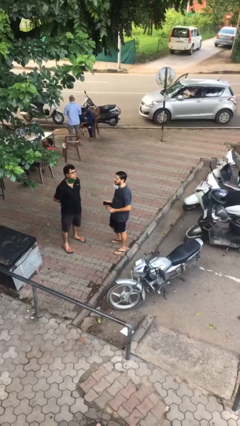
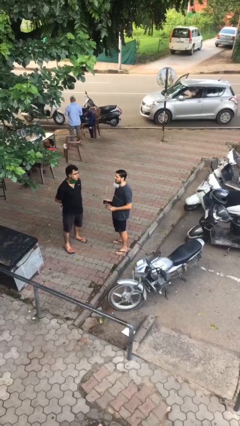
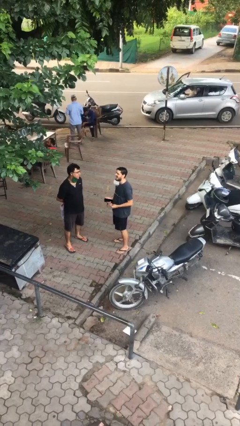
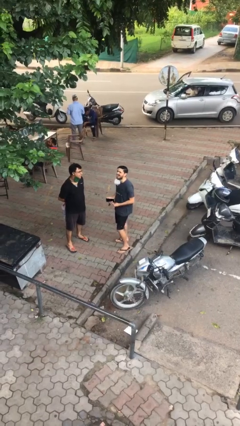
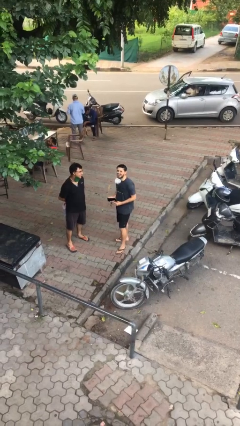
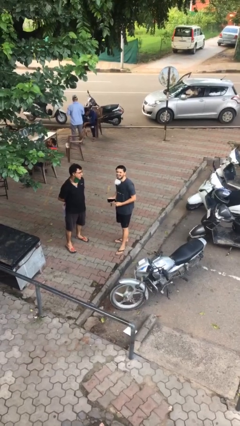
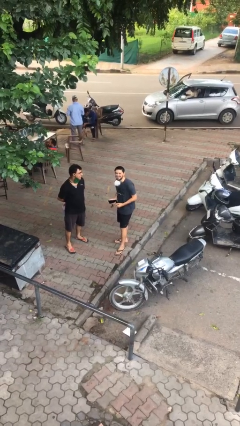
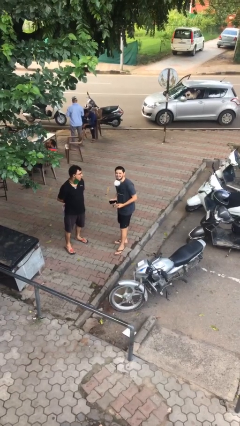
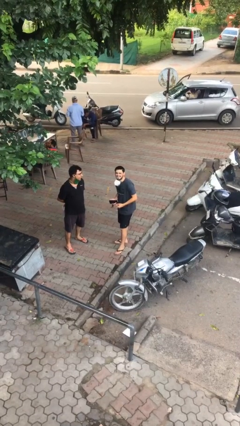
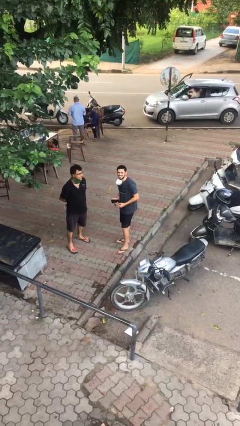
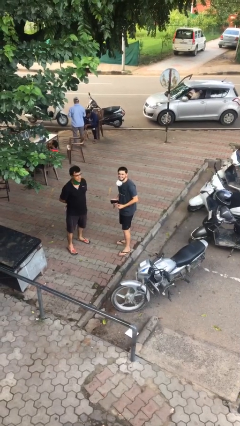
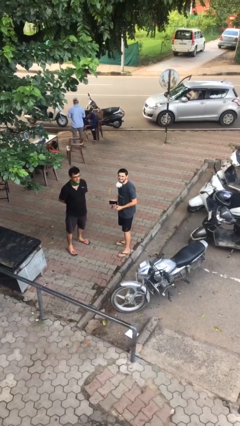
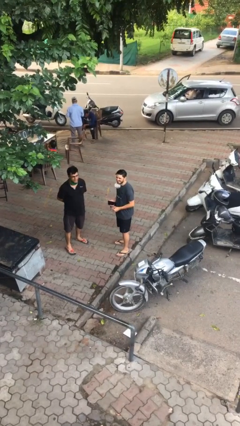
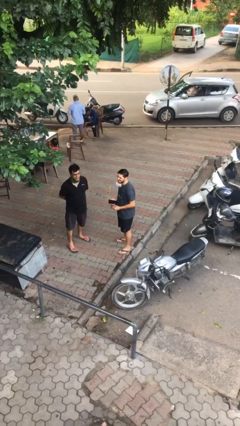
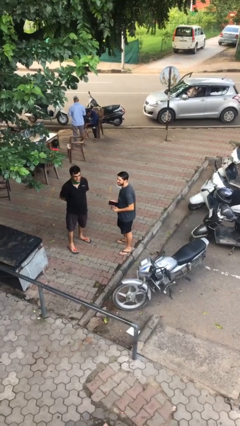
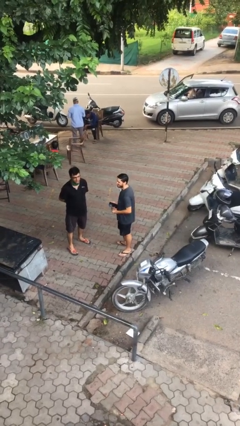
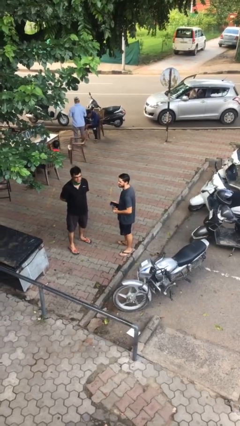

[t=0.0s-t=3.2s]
person laughs with person

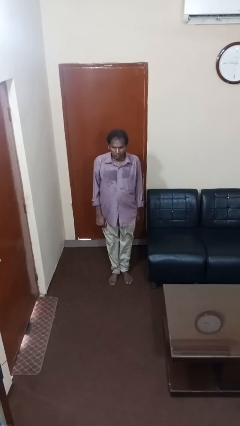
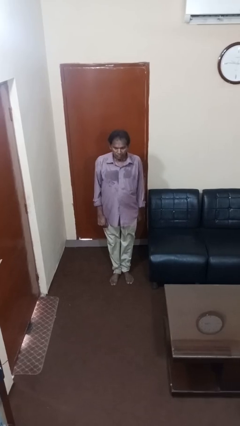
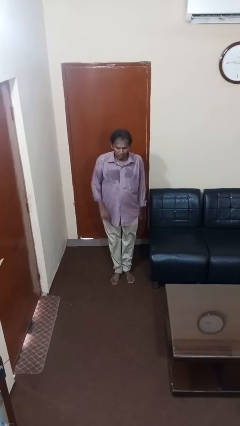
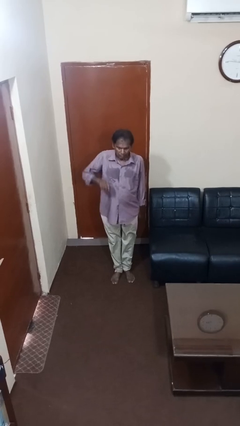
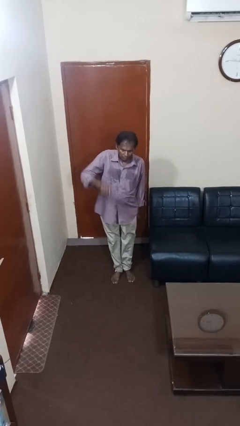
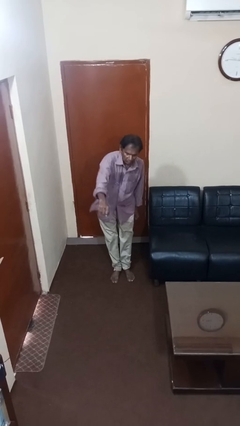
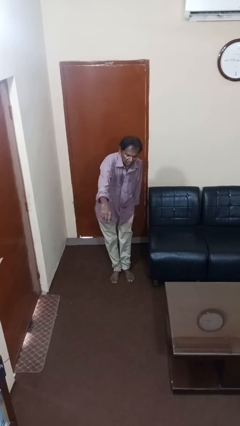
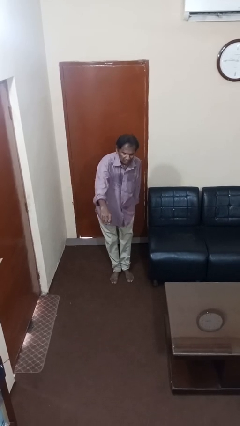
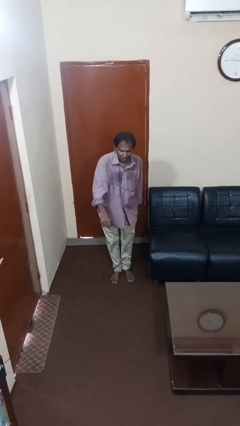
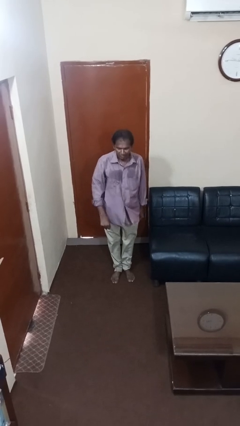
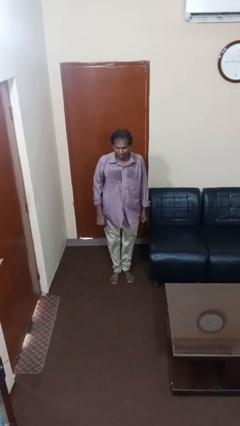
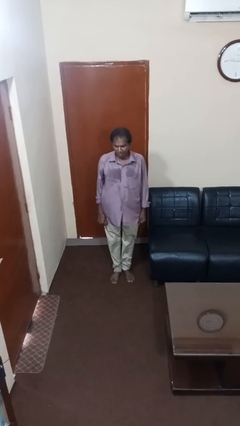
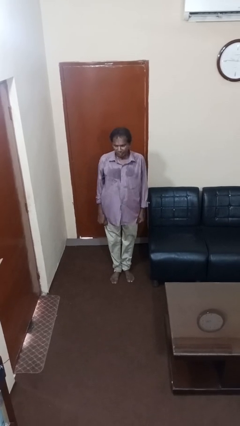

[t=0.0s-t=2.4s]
person karate chop

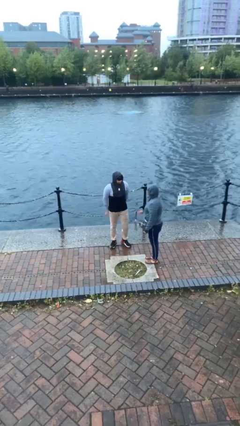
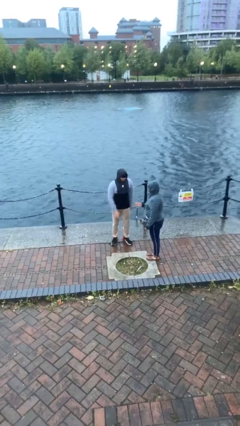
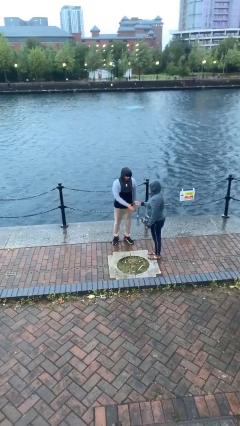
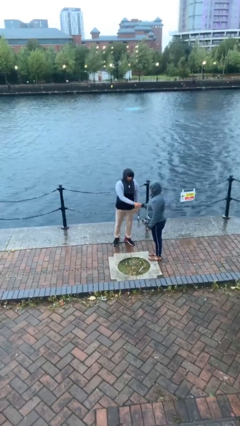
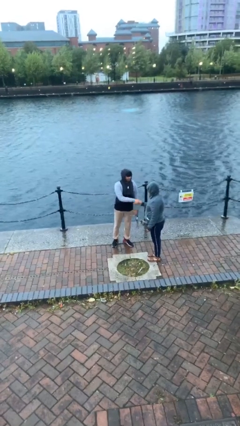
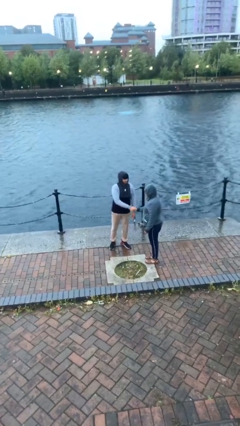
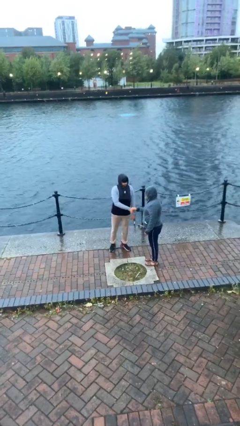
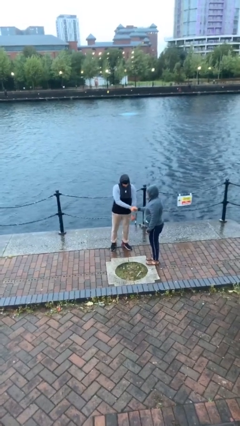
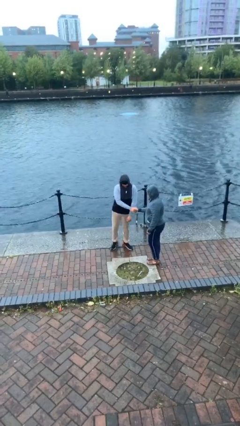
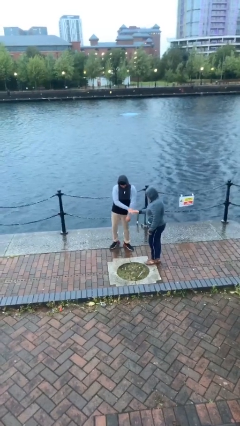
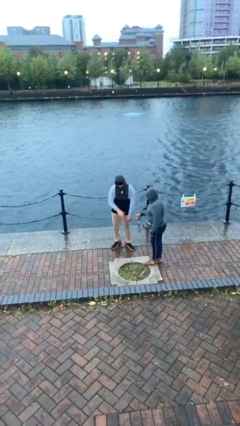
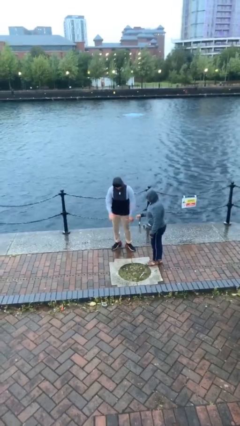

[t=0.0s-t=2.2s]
person shakes hand

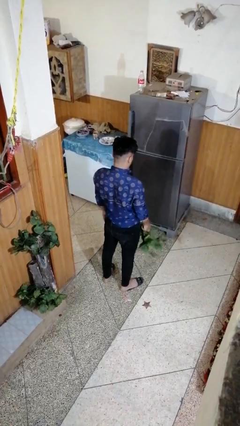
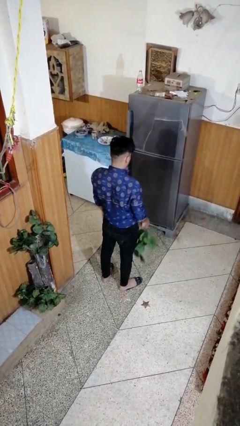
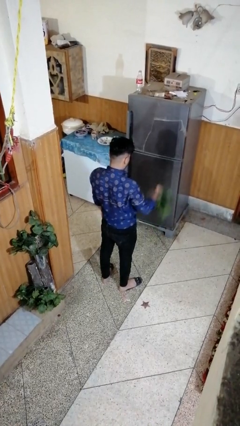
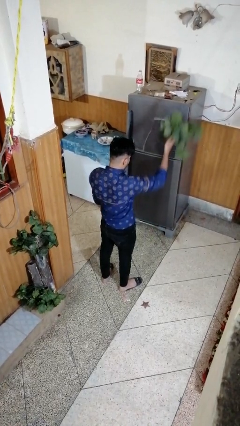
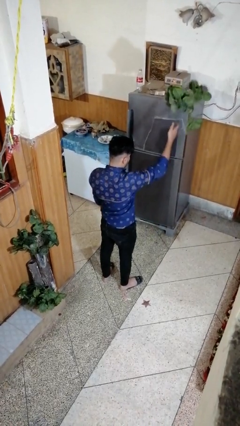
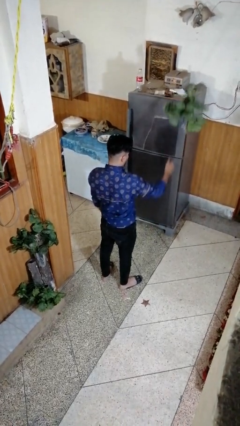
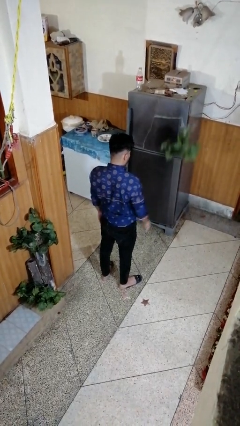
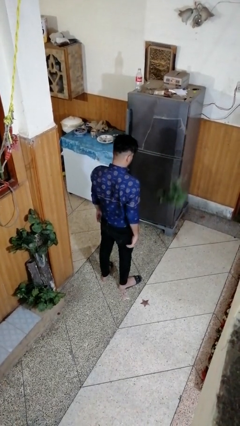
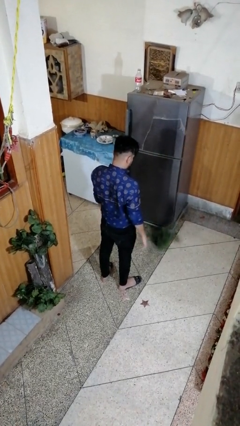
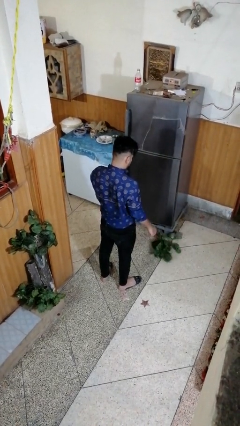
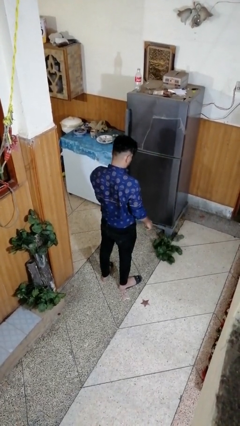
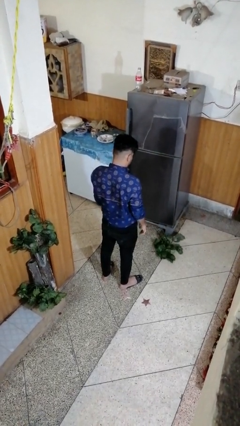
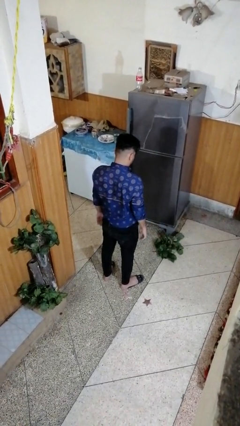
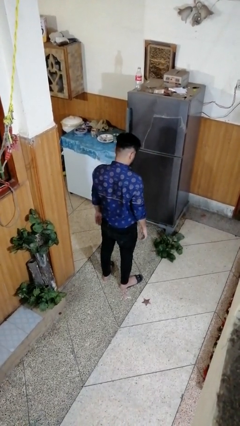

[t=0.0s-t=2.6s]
person throws object into air

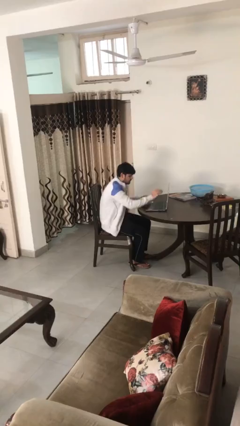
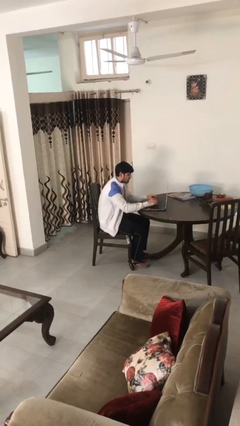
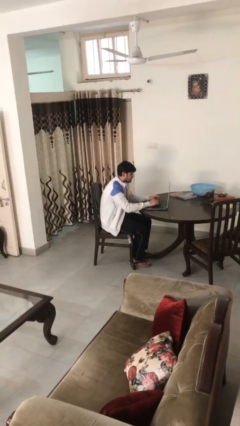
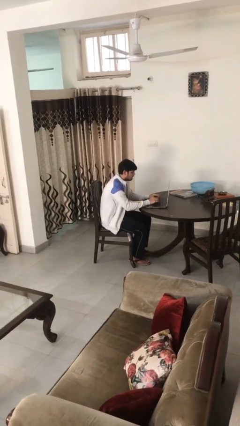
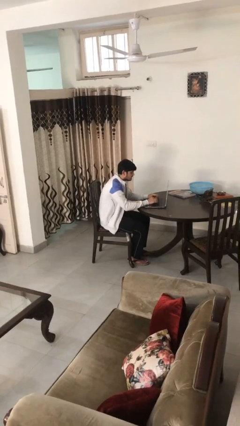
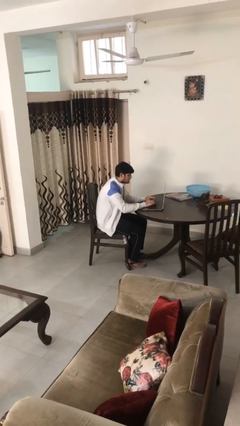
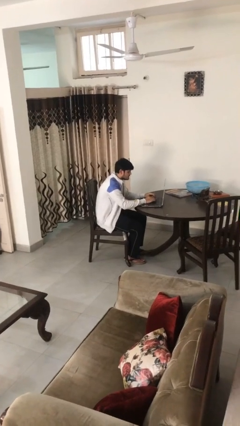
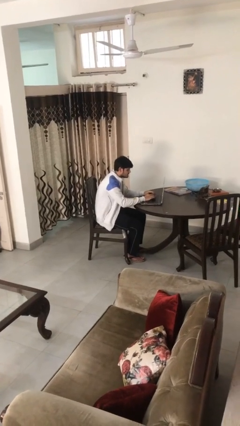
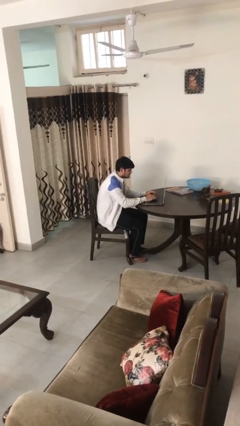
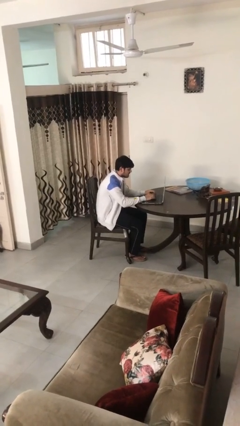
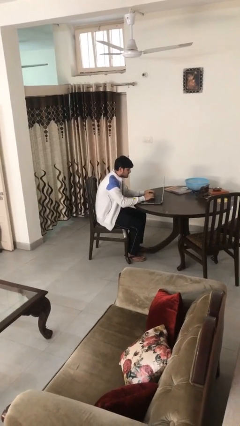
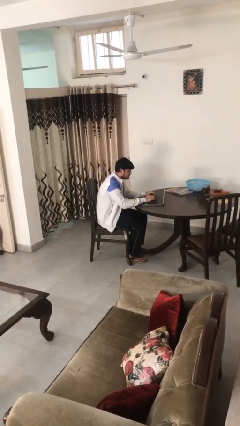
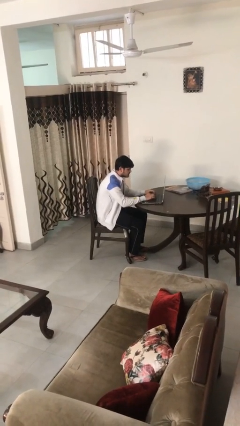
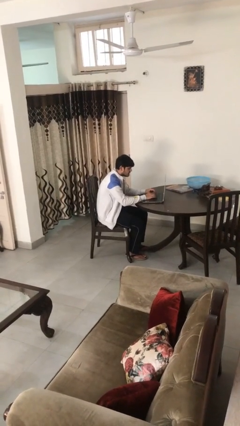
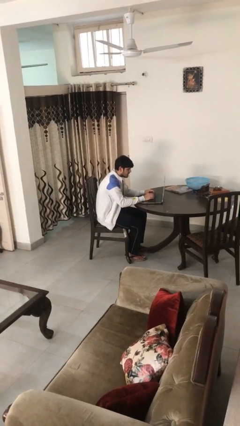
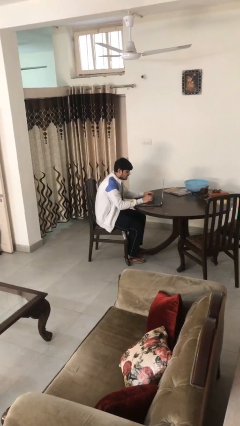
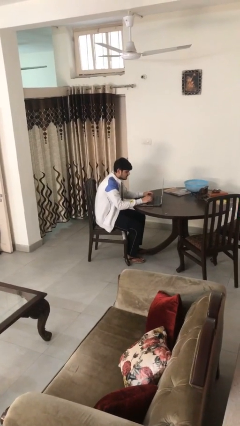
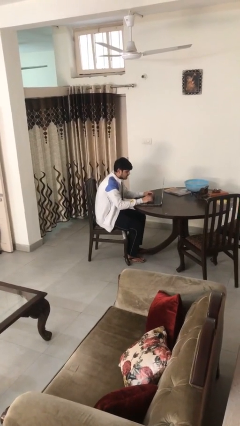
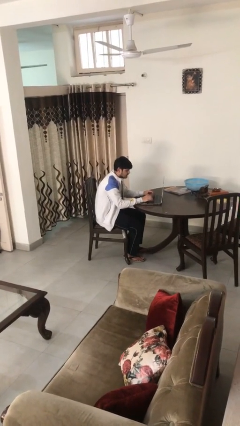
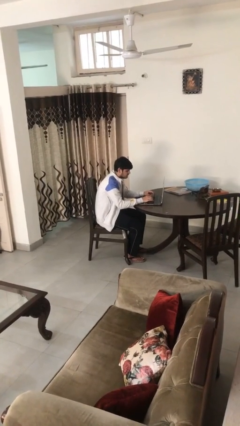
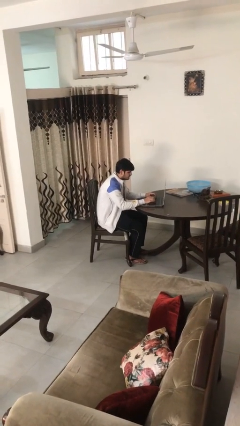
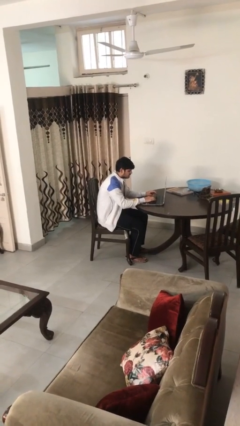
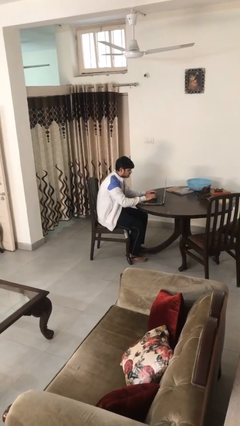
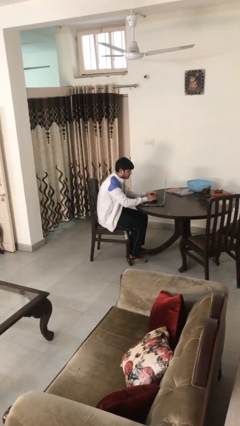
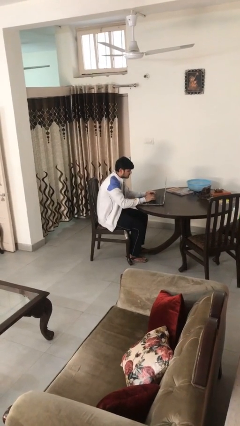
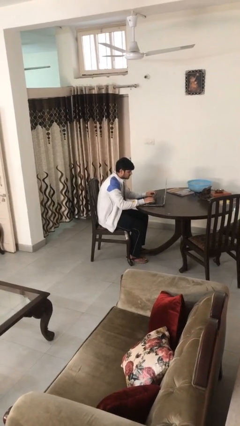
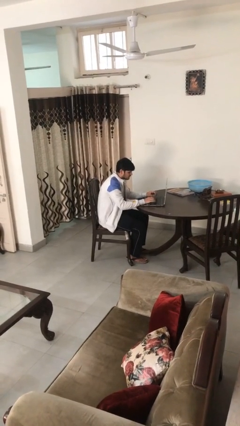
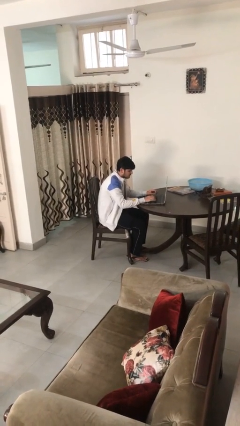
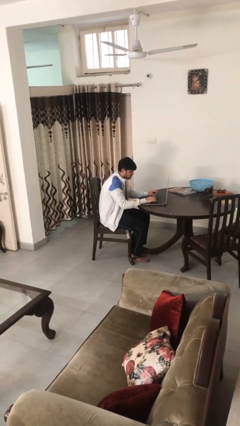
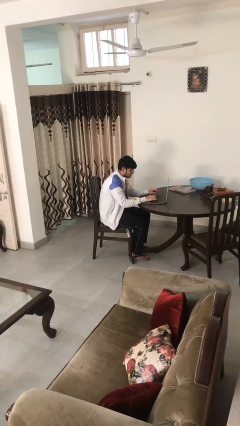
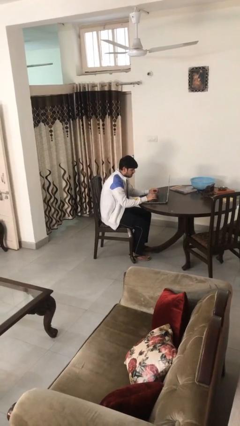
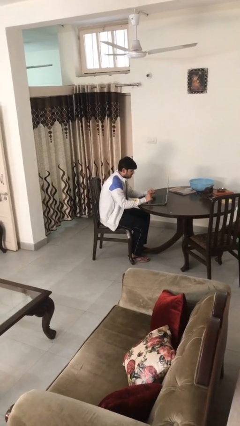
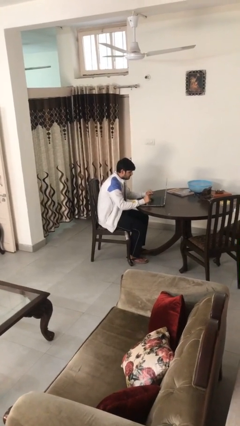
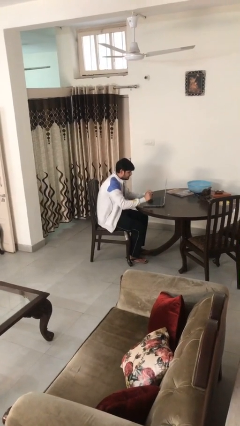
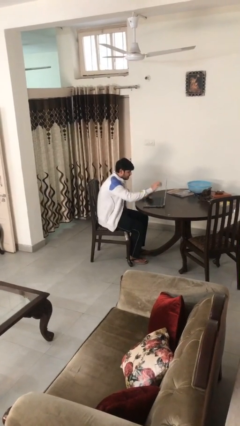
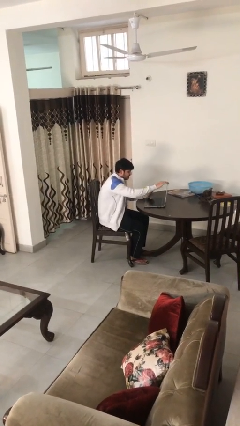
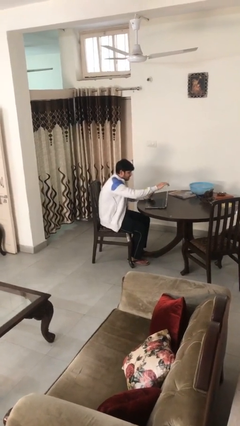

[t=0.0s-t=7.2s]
person interacts with laptop

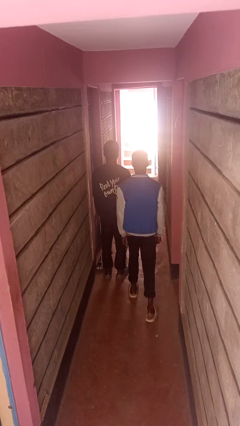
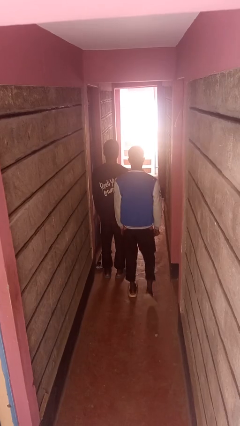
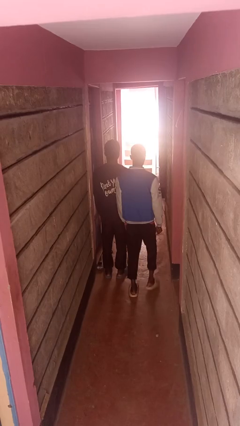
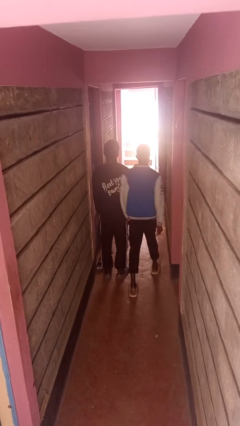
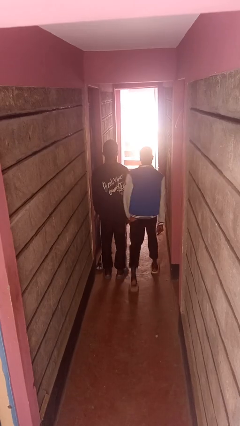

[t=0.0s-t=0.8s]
person bumps into person
